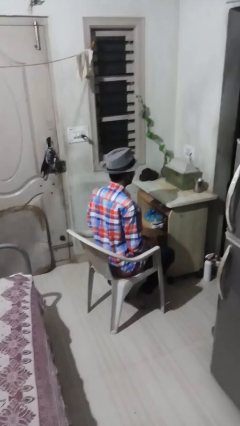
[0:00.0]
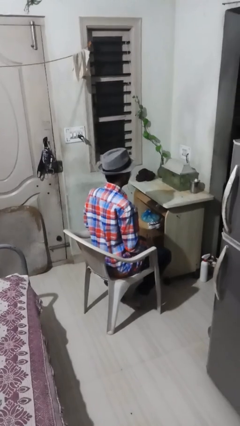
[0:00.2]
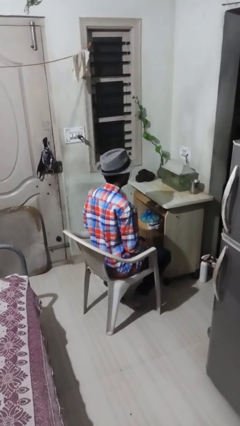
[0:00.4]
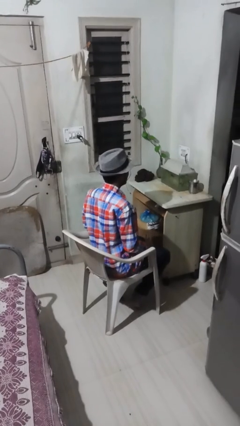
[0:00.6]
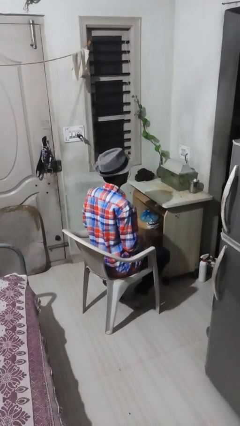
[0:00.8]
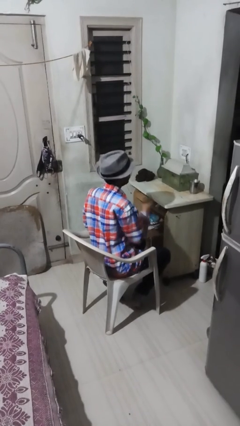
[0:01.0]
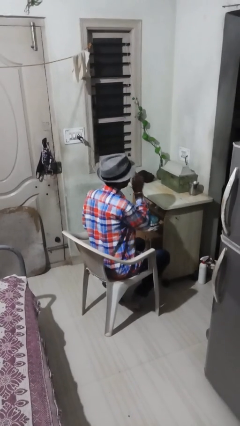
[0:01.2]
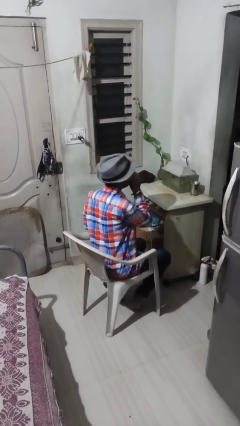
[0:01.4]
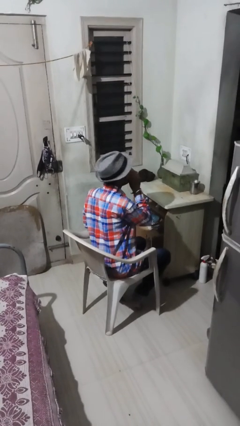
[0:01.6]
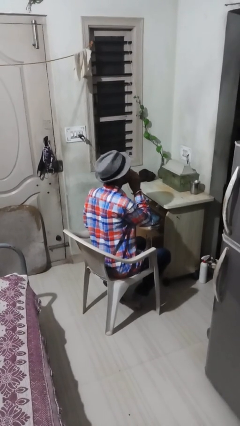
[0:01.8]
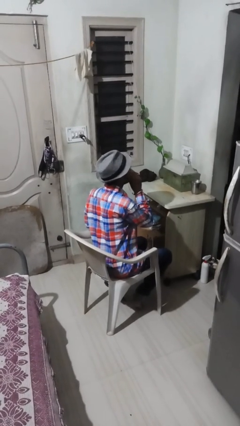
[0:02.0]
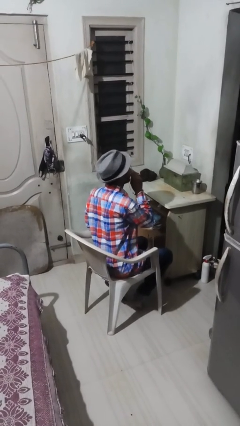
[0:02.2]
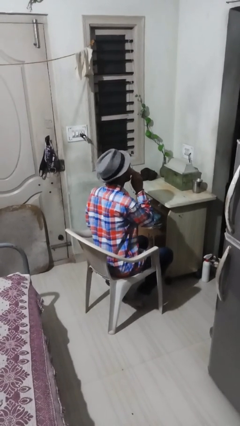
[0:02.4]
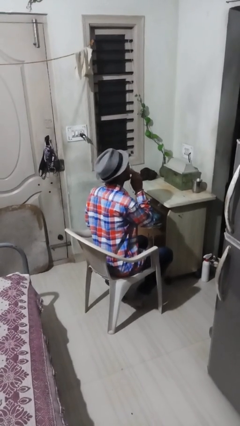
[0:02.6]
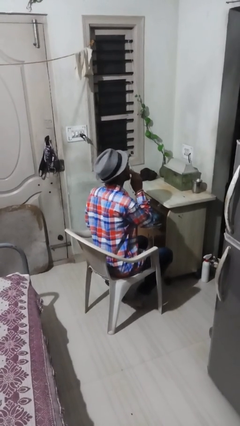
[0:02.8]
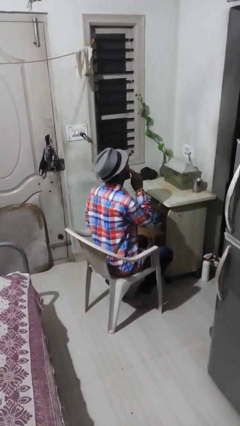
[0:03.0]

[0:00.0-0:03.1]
person licks fingers

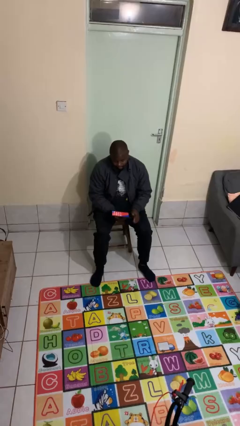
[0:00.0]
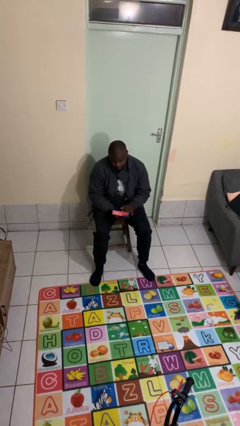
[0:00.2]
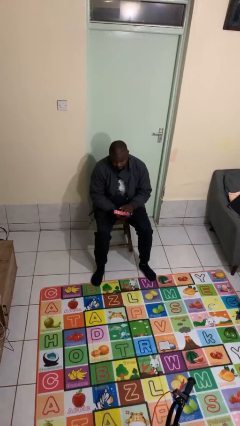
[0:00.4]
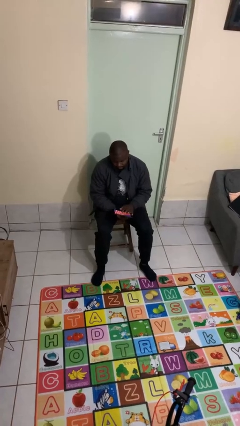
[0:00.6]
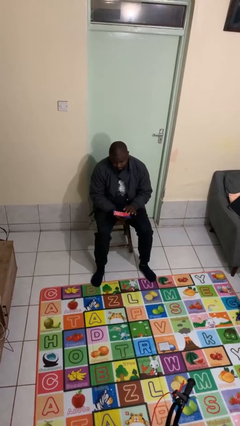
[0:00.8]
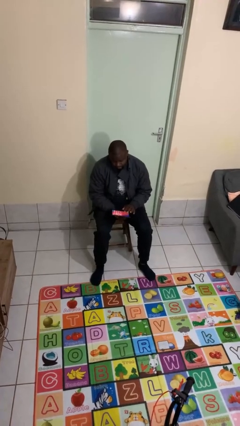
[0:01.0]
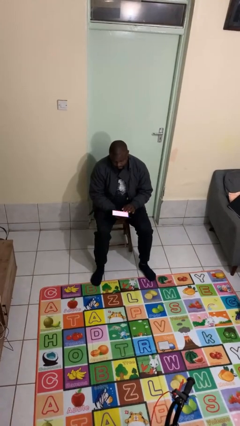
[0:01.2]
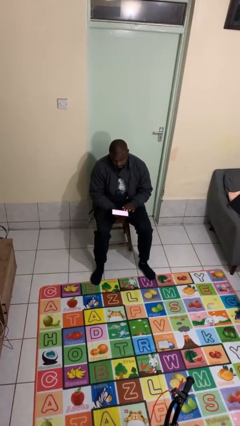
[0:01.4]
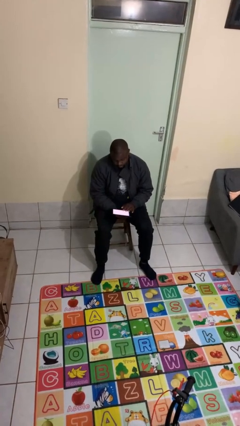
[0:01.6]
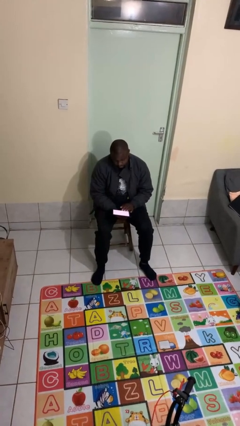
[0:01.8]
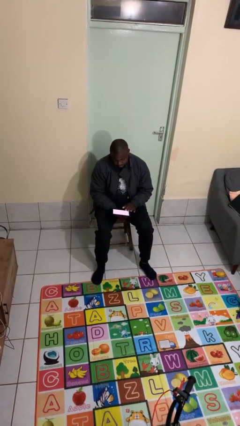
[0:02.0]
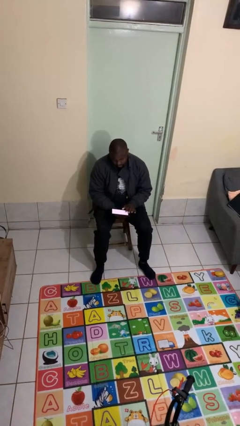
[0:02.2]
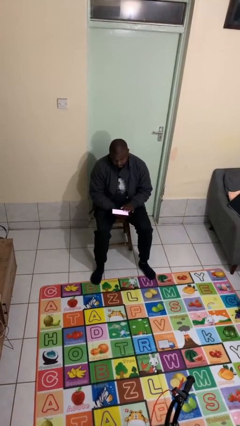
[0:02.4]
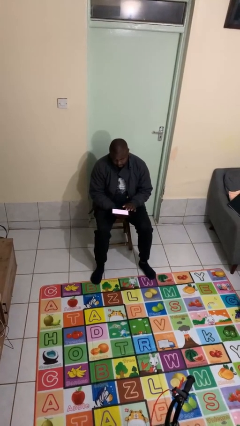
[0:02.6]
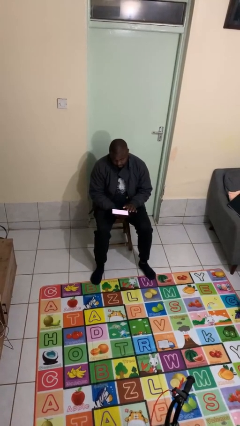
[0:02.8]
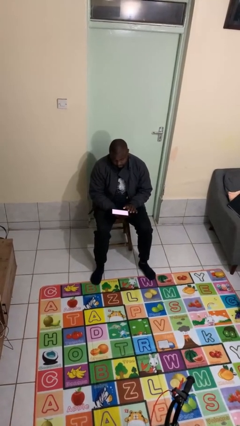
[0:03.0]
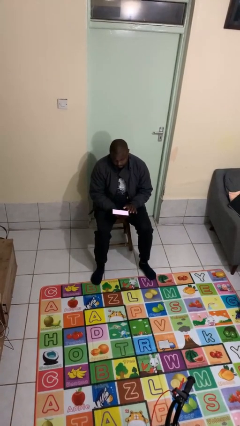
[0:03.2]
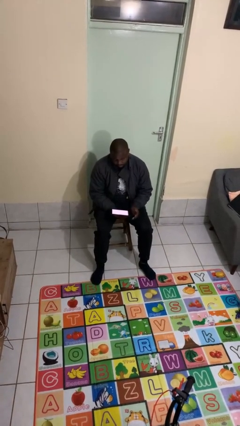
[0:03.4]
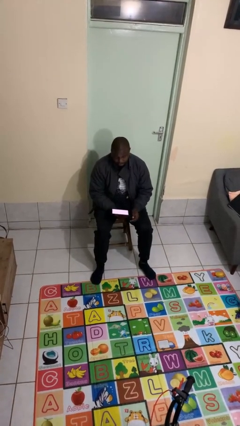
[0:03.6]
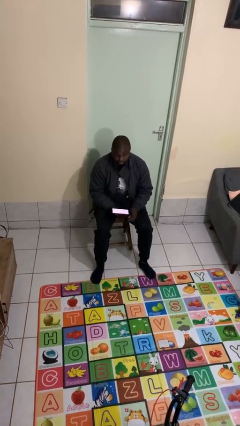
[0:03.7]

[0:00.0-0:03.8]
person interacts with tablet

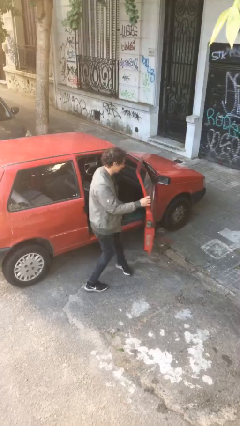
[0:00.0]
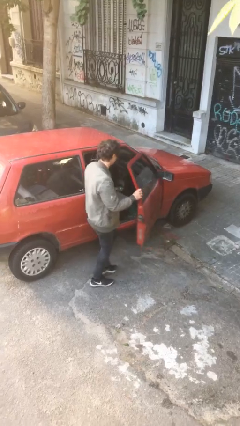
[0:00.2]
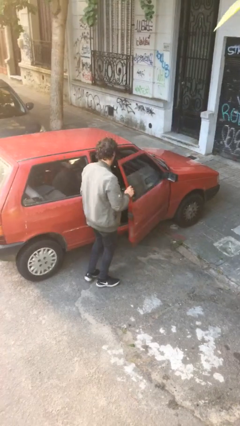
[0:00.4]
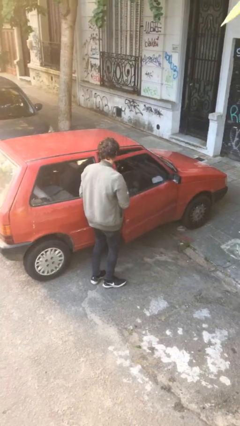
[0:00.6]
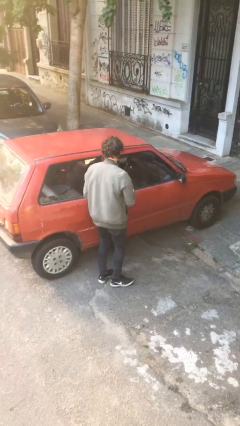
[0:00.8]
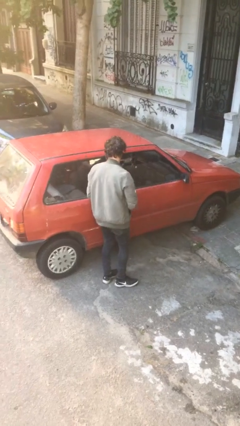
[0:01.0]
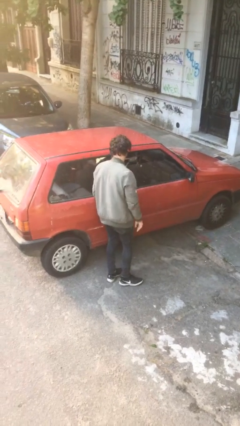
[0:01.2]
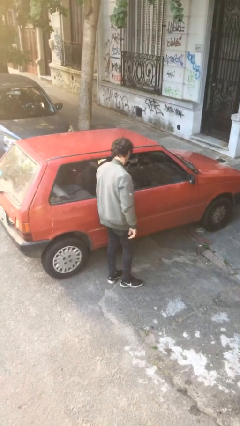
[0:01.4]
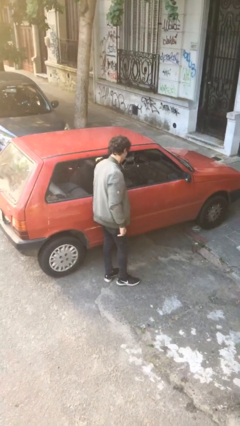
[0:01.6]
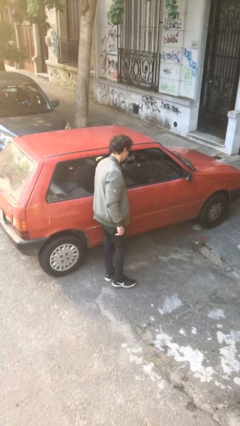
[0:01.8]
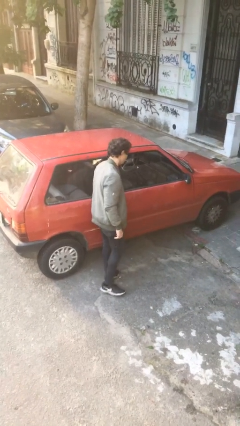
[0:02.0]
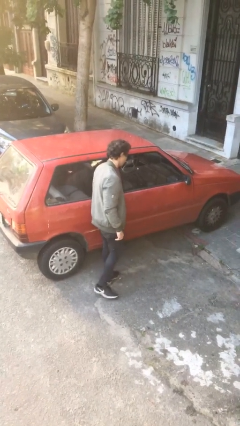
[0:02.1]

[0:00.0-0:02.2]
person closes car door

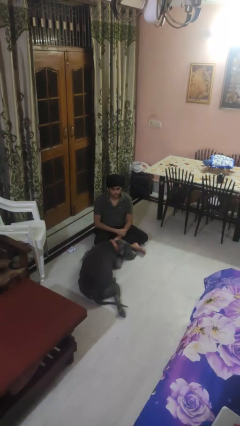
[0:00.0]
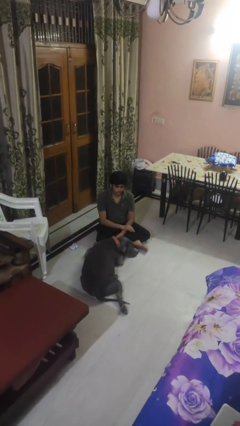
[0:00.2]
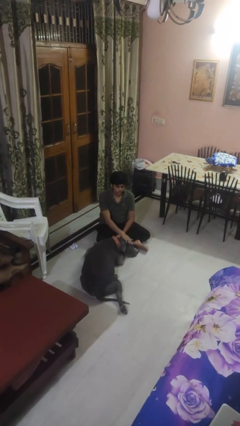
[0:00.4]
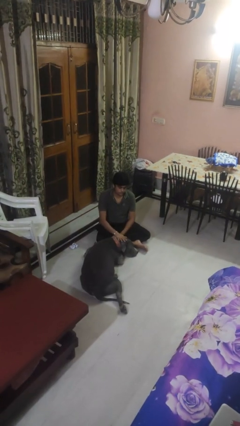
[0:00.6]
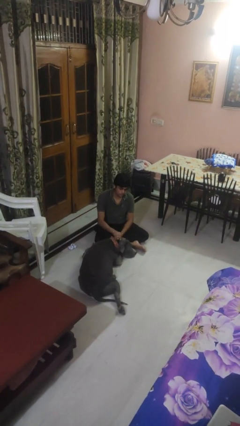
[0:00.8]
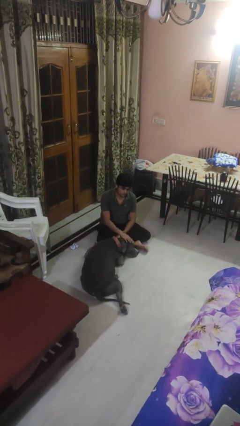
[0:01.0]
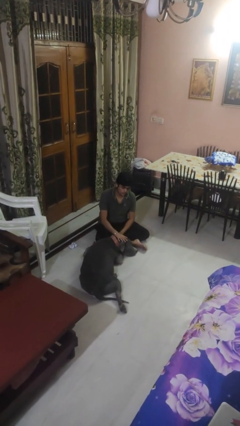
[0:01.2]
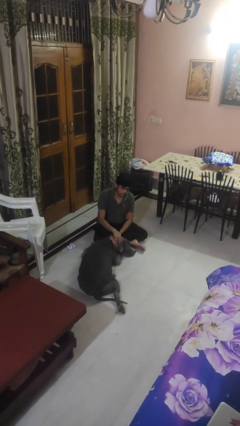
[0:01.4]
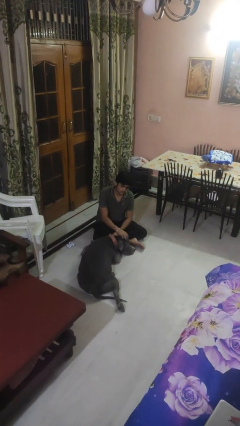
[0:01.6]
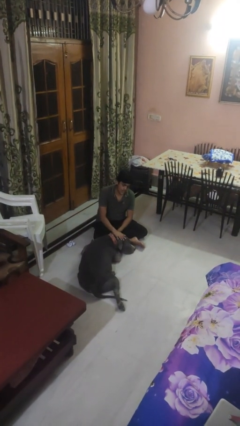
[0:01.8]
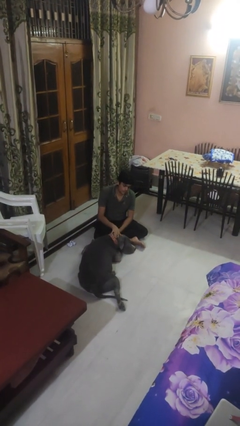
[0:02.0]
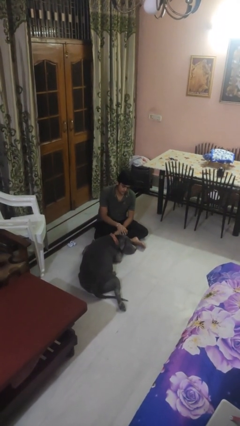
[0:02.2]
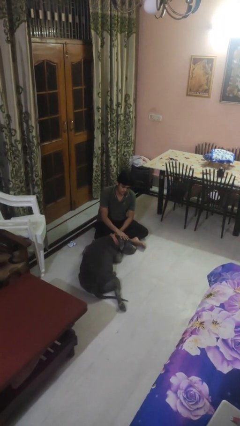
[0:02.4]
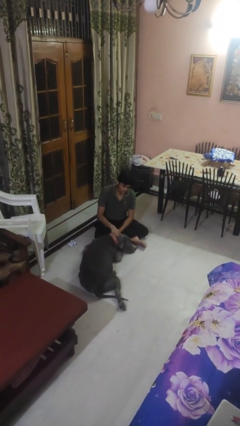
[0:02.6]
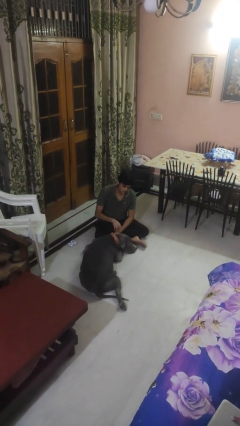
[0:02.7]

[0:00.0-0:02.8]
person pets dog

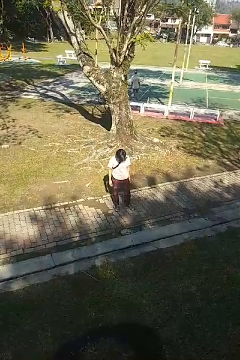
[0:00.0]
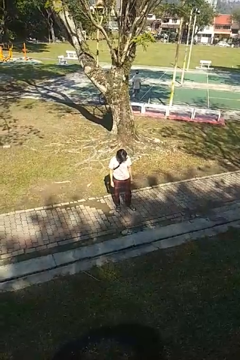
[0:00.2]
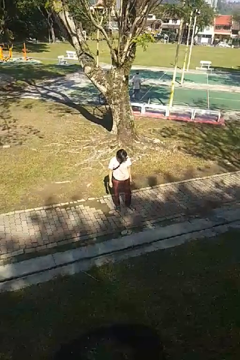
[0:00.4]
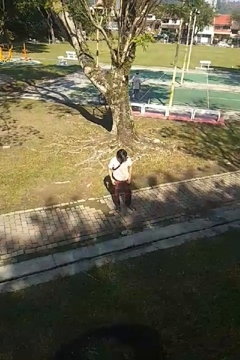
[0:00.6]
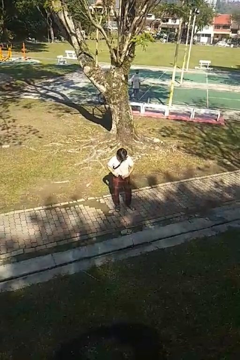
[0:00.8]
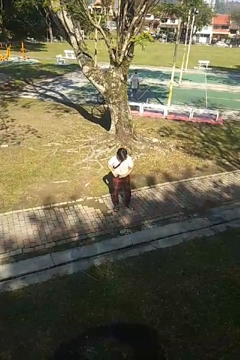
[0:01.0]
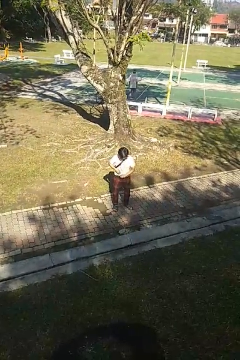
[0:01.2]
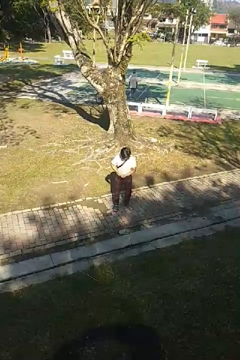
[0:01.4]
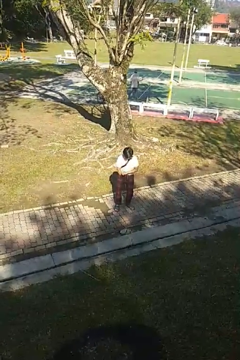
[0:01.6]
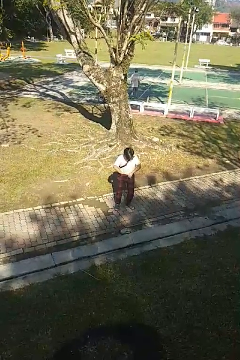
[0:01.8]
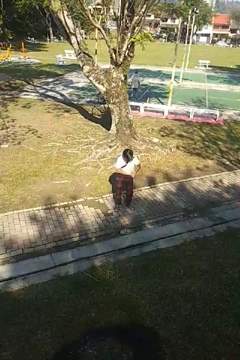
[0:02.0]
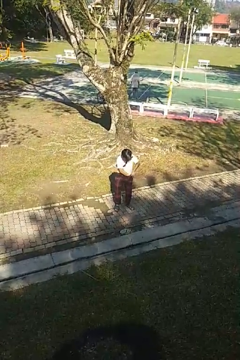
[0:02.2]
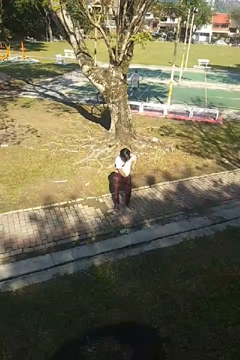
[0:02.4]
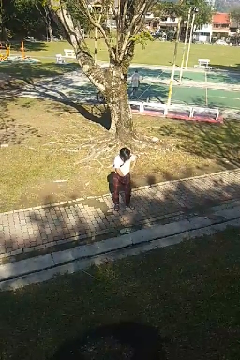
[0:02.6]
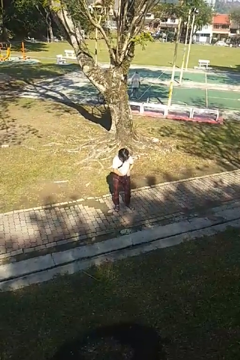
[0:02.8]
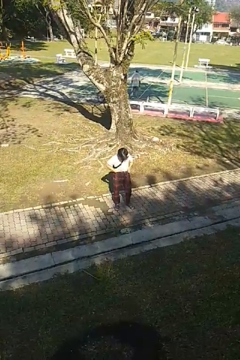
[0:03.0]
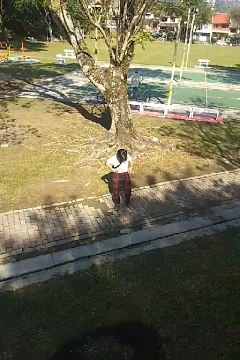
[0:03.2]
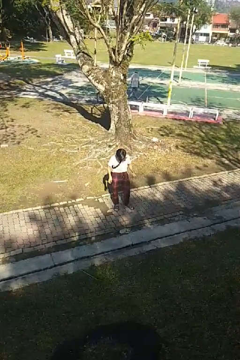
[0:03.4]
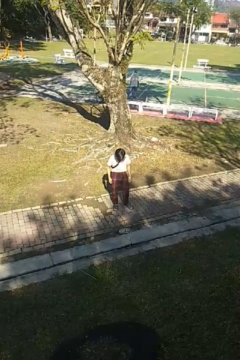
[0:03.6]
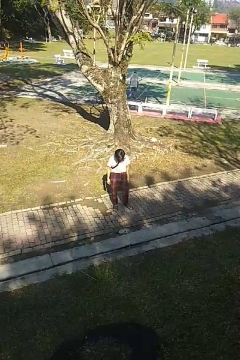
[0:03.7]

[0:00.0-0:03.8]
person tucks in shirt

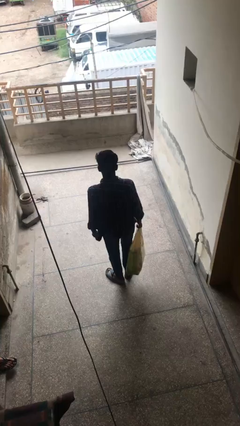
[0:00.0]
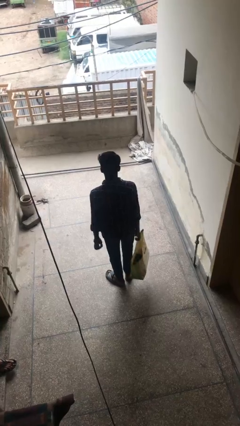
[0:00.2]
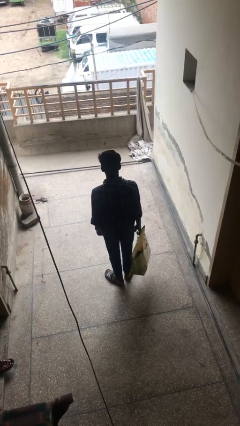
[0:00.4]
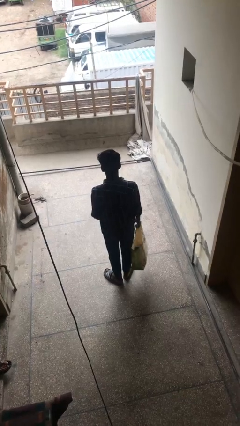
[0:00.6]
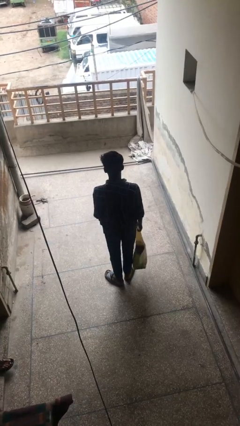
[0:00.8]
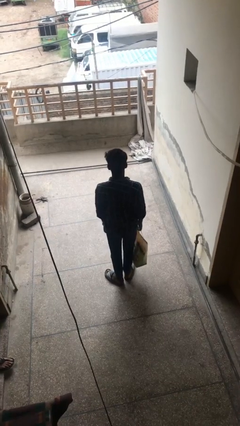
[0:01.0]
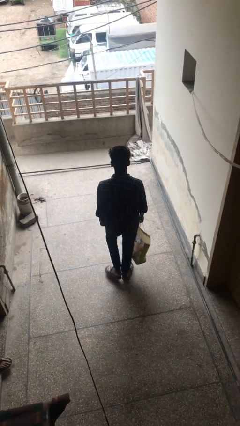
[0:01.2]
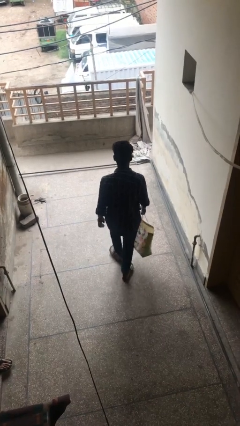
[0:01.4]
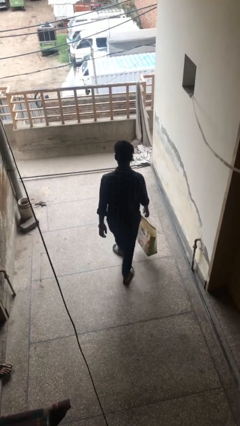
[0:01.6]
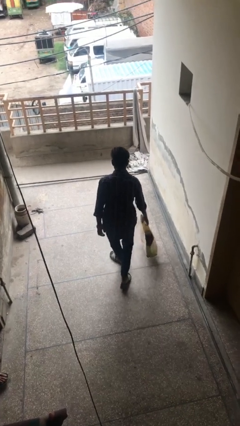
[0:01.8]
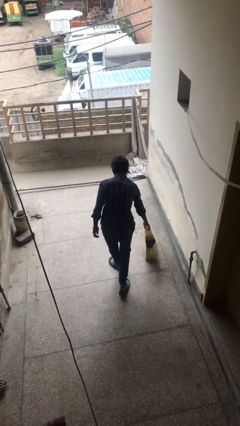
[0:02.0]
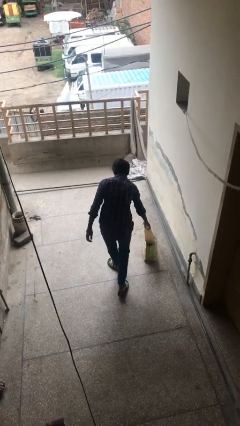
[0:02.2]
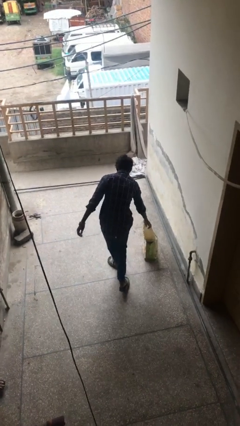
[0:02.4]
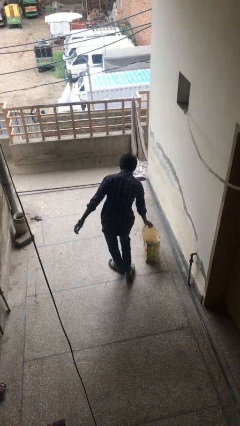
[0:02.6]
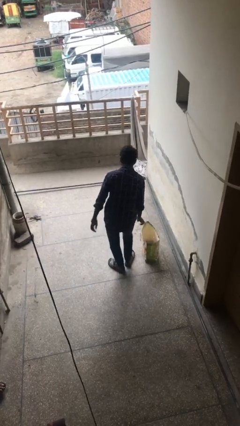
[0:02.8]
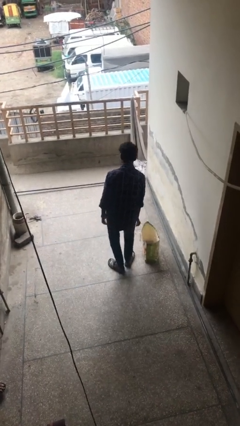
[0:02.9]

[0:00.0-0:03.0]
person puts down object on floor
